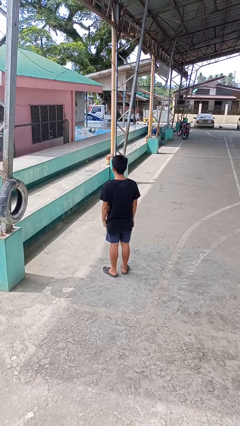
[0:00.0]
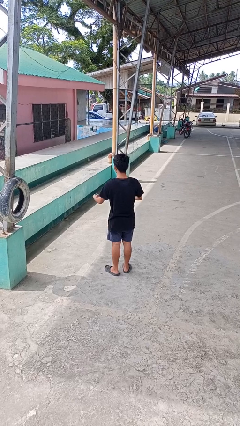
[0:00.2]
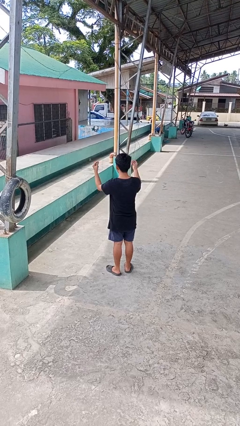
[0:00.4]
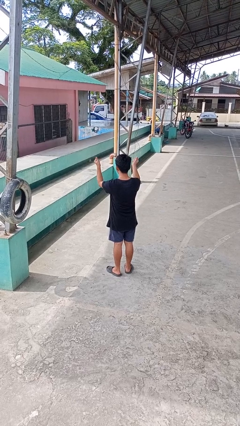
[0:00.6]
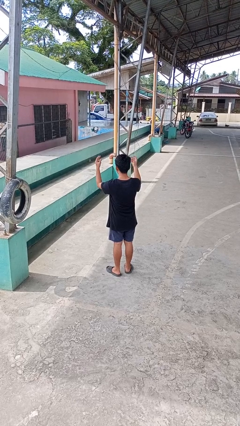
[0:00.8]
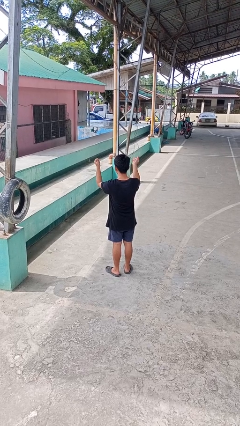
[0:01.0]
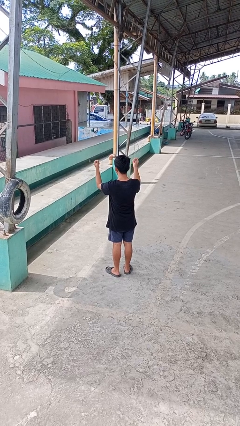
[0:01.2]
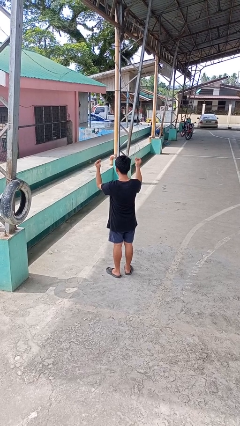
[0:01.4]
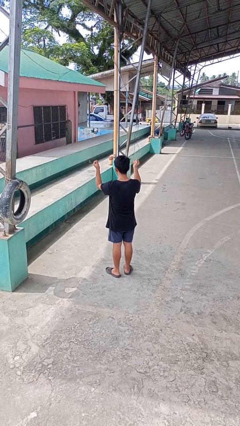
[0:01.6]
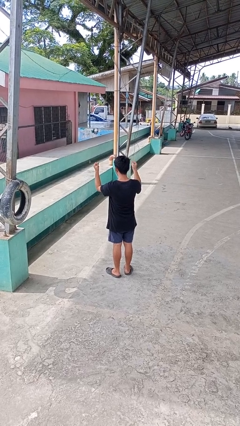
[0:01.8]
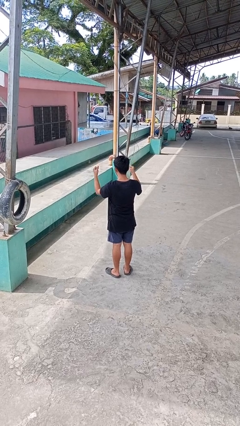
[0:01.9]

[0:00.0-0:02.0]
person snaps fingers

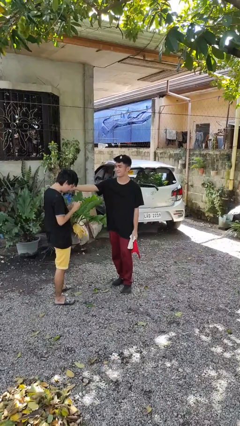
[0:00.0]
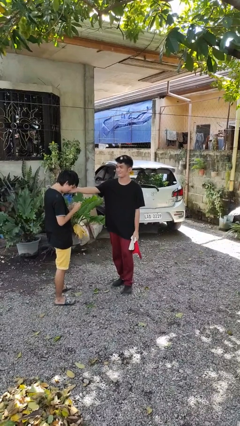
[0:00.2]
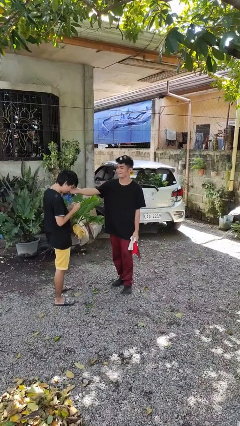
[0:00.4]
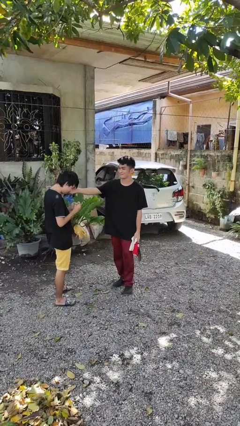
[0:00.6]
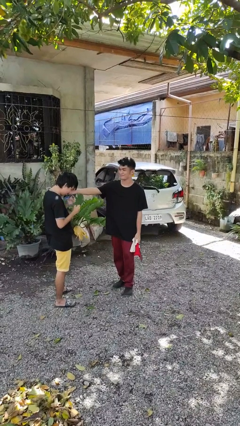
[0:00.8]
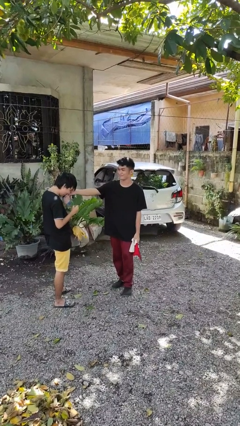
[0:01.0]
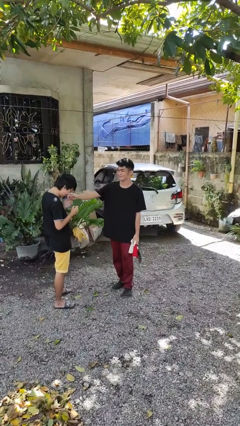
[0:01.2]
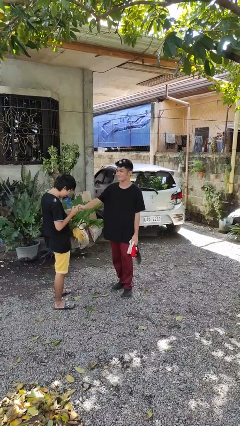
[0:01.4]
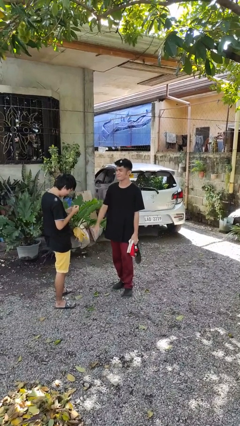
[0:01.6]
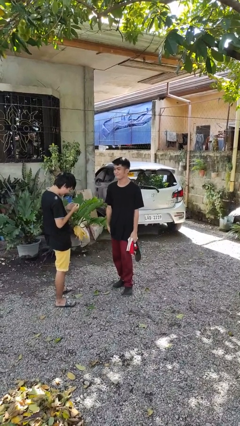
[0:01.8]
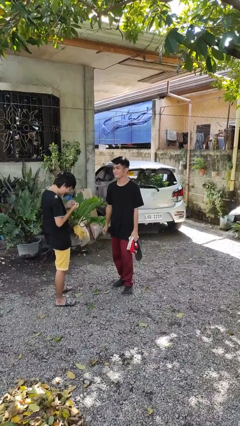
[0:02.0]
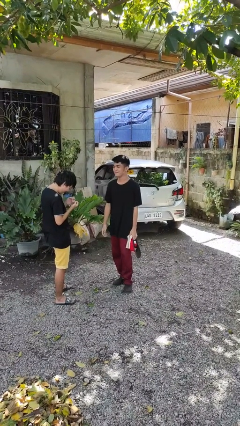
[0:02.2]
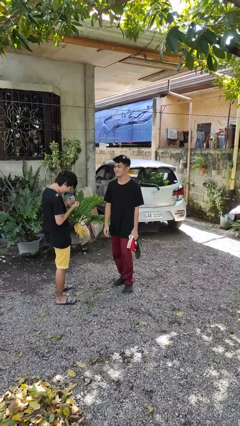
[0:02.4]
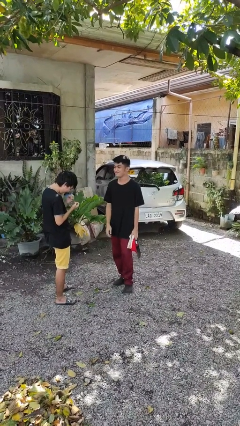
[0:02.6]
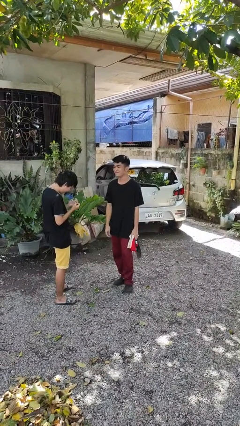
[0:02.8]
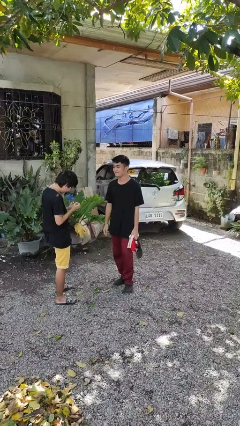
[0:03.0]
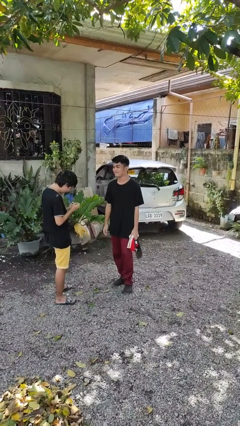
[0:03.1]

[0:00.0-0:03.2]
person touches face of person

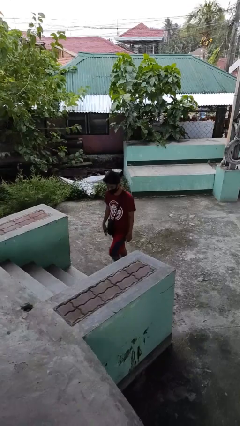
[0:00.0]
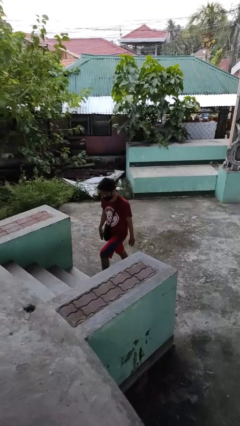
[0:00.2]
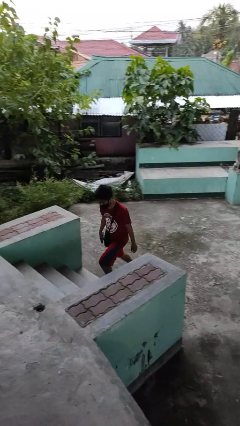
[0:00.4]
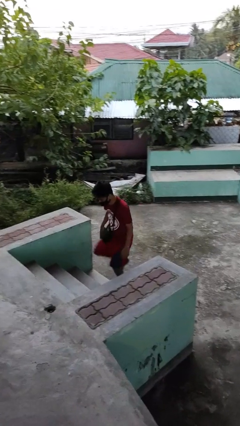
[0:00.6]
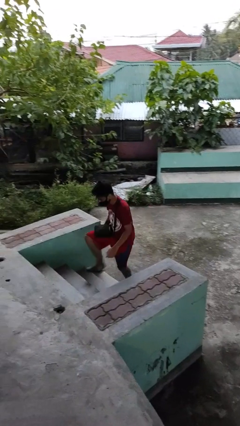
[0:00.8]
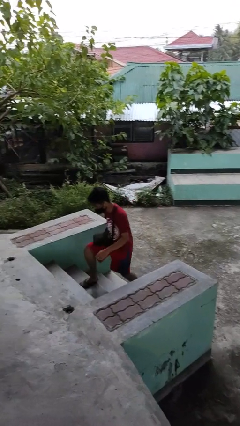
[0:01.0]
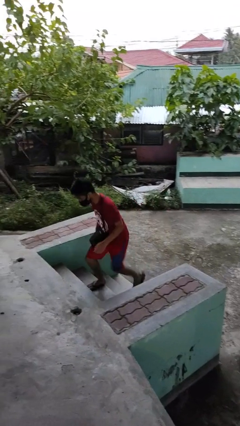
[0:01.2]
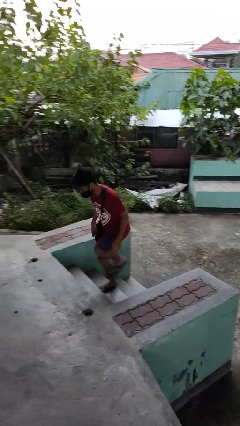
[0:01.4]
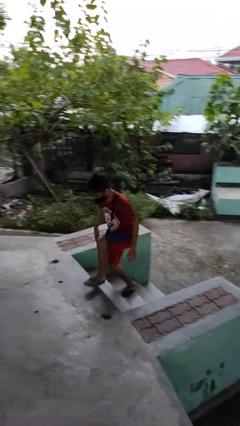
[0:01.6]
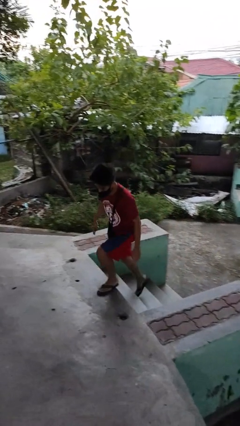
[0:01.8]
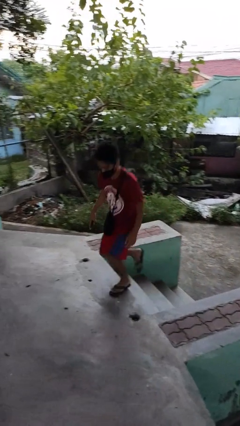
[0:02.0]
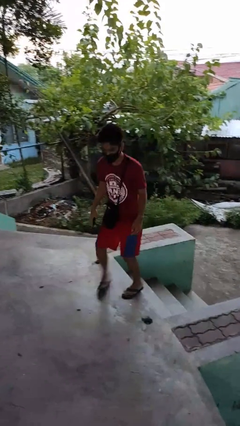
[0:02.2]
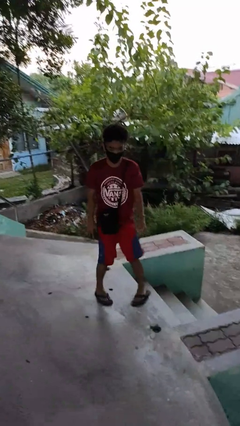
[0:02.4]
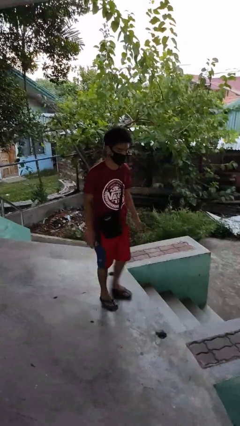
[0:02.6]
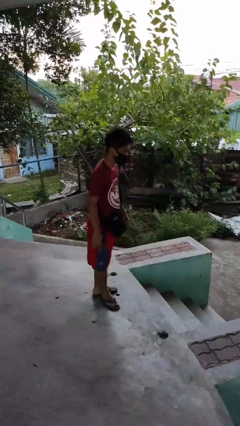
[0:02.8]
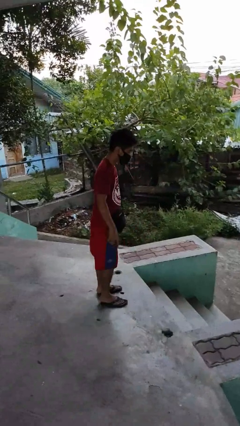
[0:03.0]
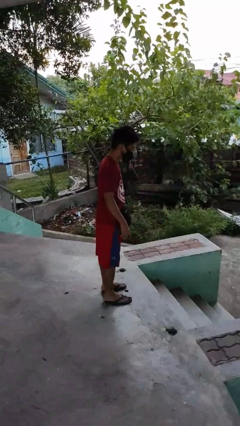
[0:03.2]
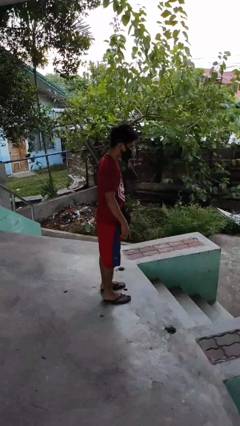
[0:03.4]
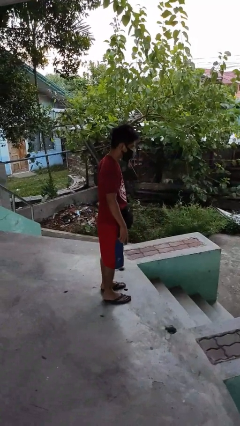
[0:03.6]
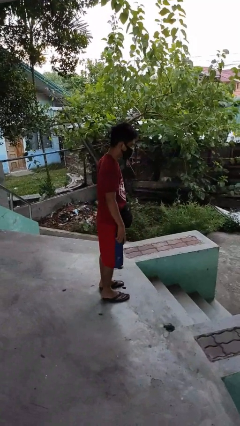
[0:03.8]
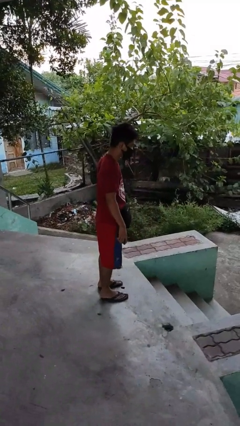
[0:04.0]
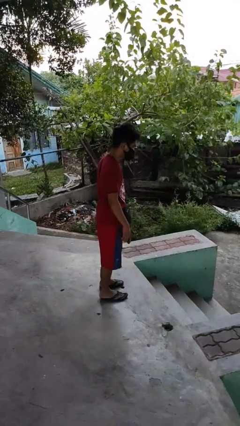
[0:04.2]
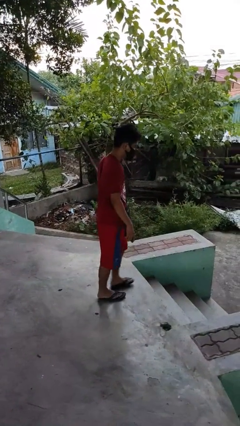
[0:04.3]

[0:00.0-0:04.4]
person climbs up stairs

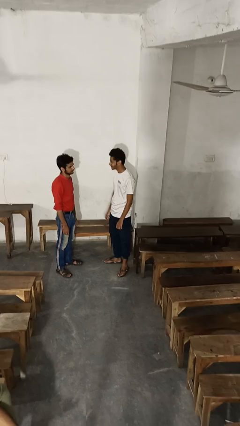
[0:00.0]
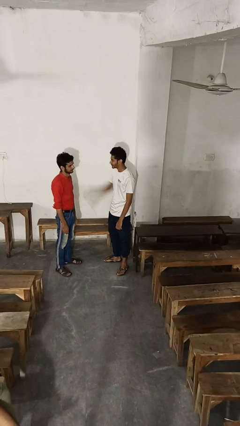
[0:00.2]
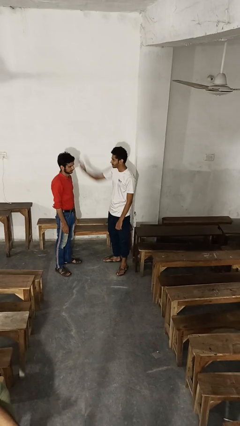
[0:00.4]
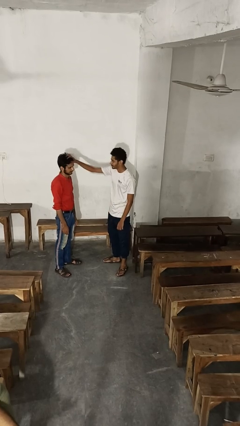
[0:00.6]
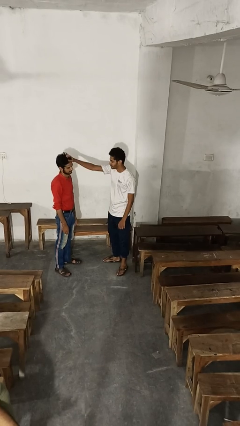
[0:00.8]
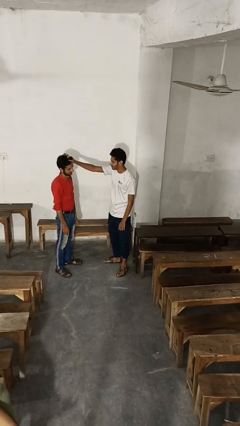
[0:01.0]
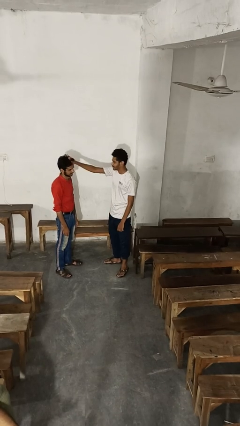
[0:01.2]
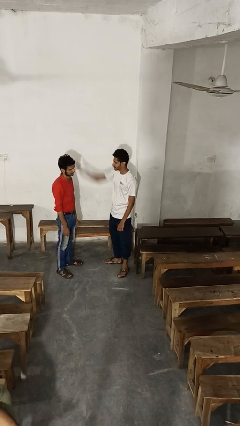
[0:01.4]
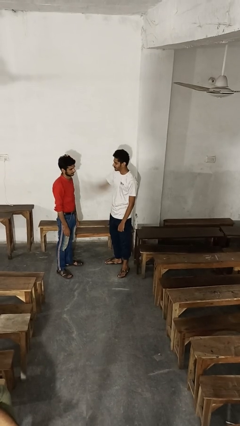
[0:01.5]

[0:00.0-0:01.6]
person grabs person by hair

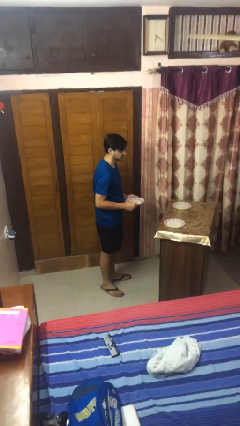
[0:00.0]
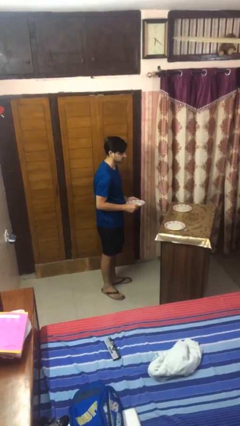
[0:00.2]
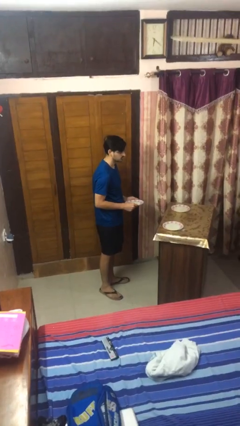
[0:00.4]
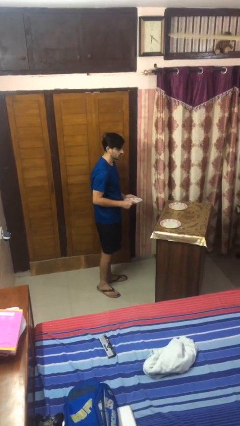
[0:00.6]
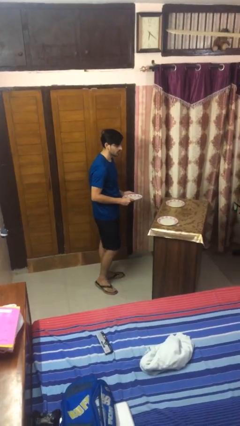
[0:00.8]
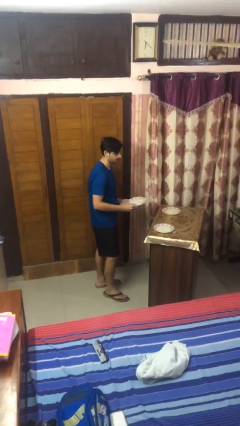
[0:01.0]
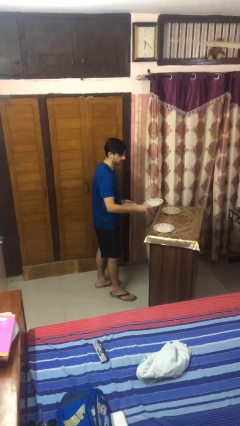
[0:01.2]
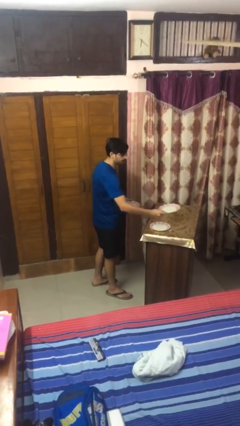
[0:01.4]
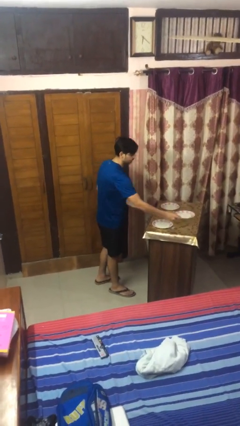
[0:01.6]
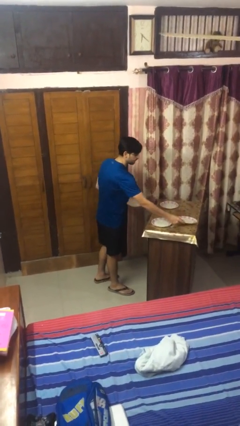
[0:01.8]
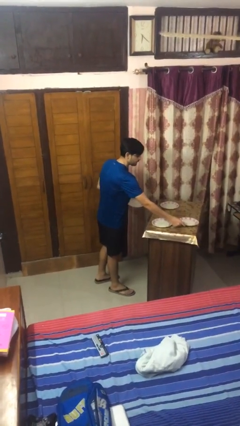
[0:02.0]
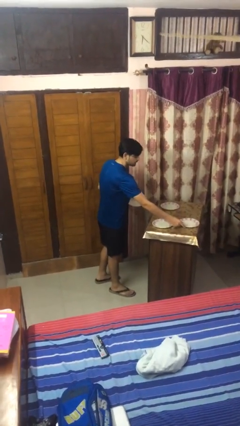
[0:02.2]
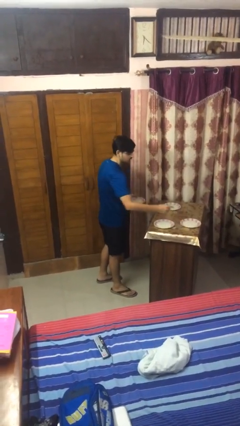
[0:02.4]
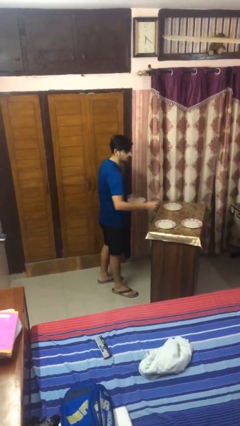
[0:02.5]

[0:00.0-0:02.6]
person sets table

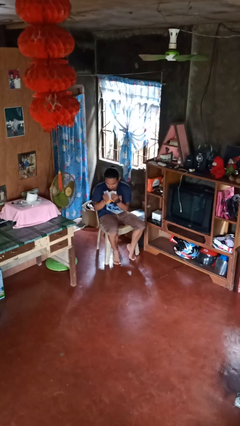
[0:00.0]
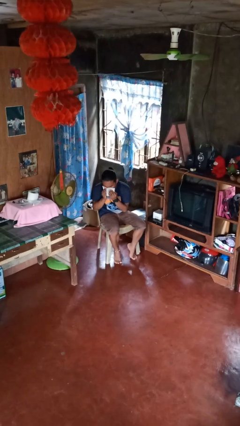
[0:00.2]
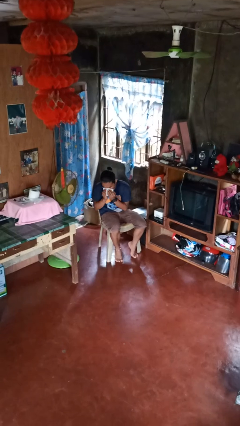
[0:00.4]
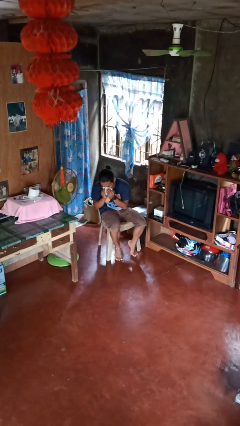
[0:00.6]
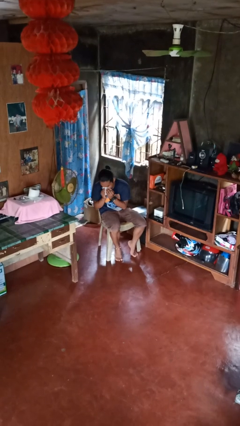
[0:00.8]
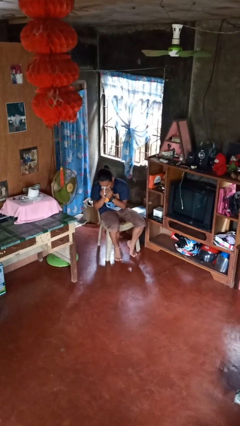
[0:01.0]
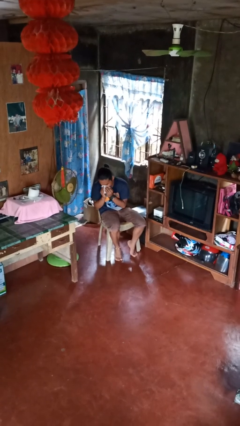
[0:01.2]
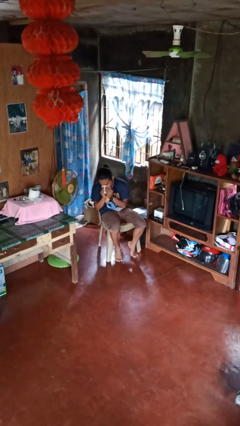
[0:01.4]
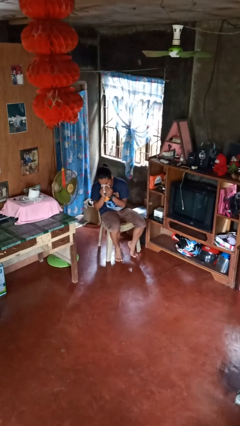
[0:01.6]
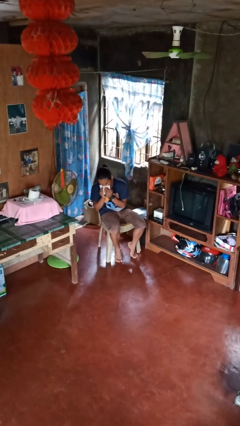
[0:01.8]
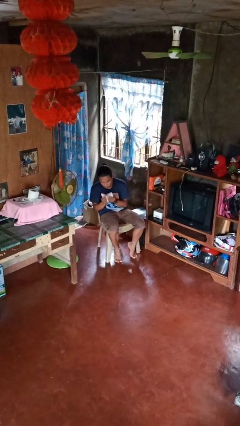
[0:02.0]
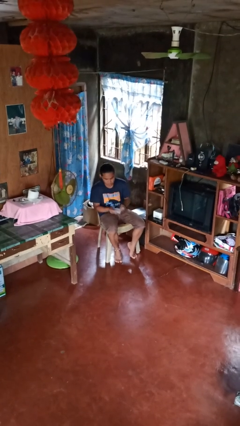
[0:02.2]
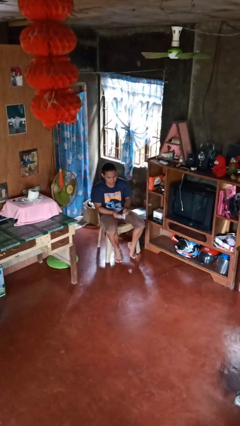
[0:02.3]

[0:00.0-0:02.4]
person blows nose

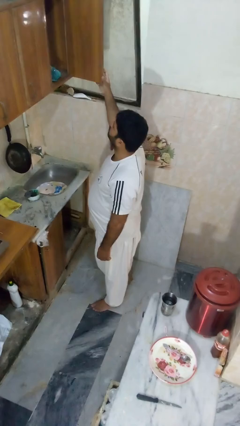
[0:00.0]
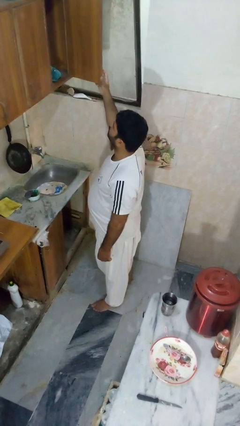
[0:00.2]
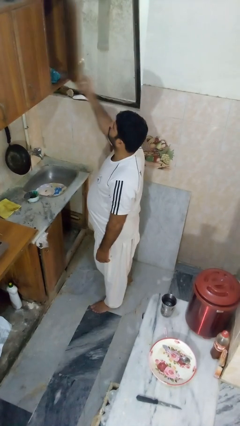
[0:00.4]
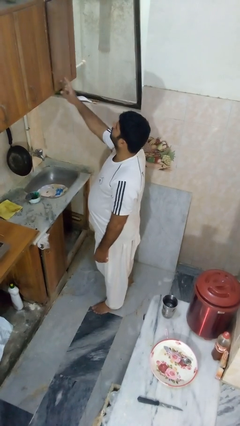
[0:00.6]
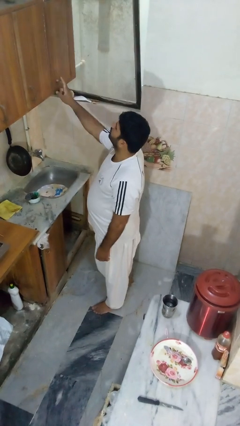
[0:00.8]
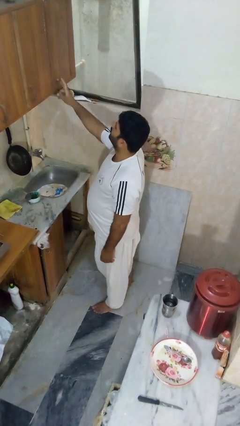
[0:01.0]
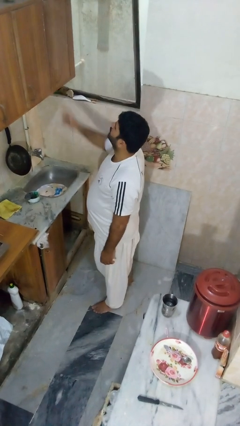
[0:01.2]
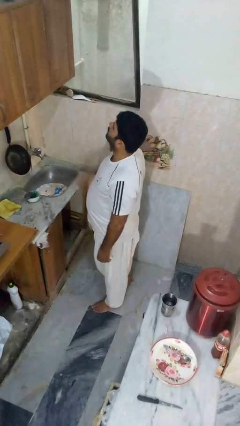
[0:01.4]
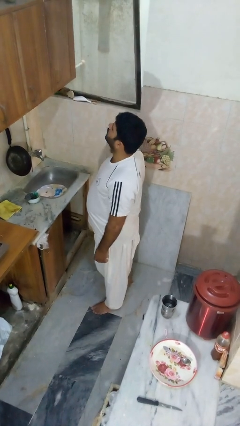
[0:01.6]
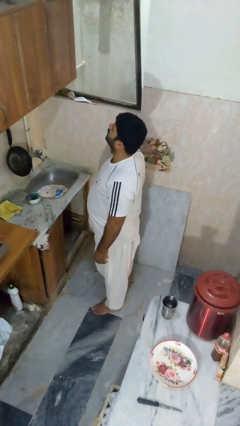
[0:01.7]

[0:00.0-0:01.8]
person closes cabinet
